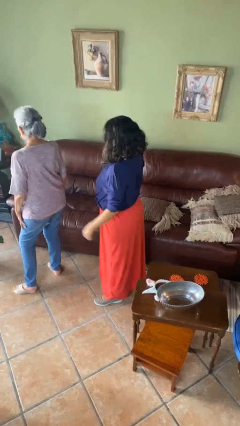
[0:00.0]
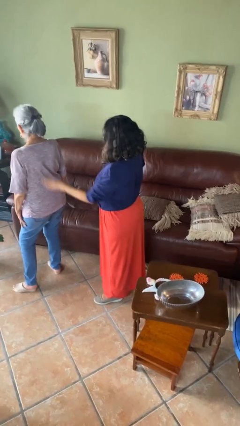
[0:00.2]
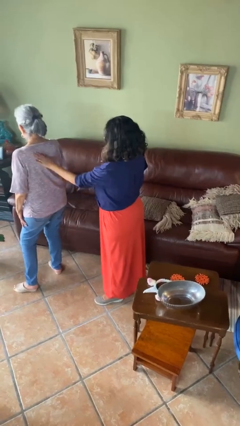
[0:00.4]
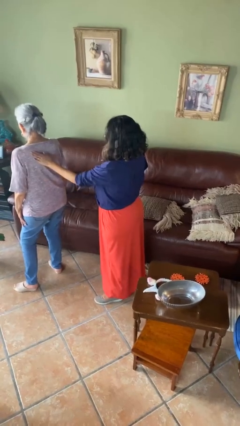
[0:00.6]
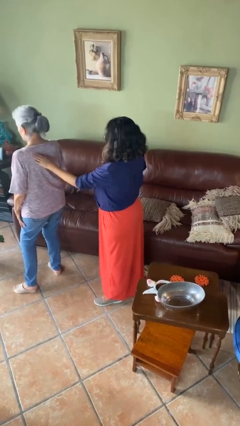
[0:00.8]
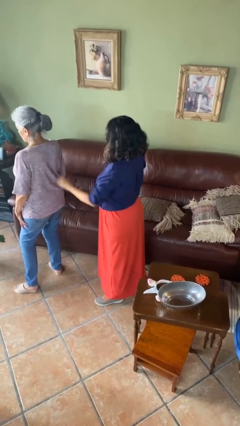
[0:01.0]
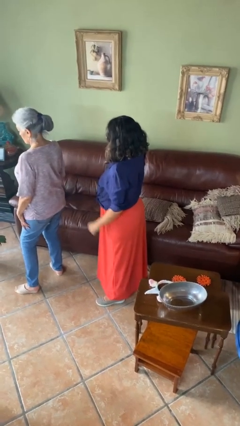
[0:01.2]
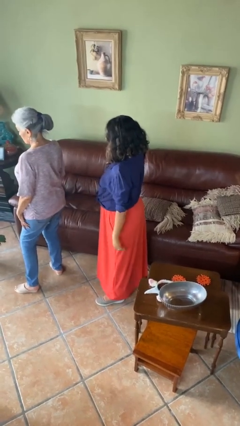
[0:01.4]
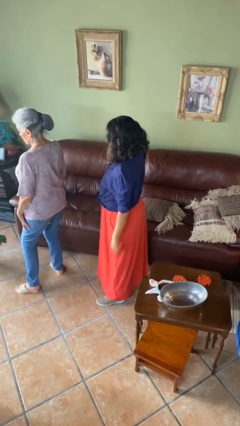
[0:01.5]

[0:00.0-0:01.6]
person touches back of person

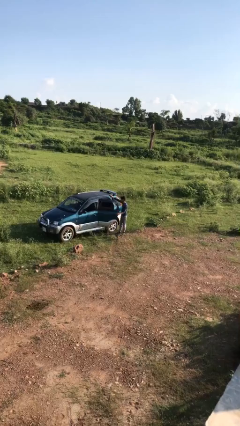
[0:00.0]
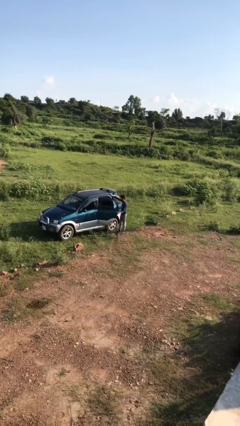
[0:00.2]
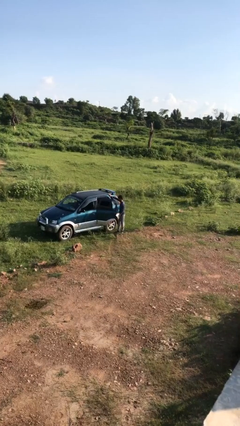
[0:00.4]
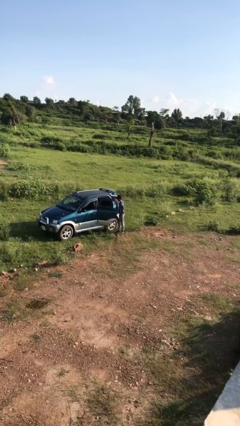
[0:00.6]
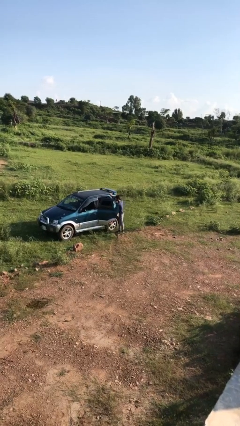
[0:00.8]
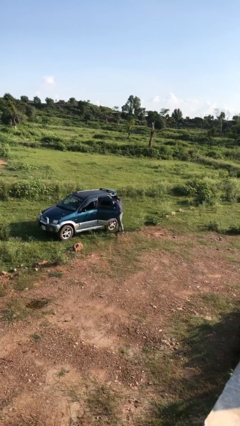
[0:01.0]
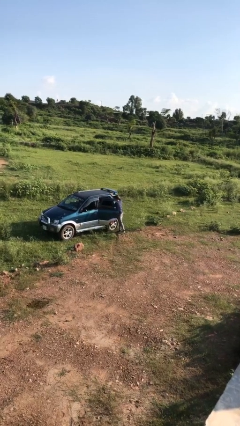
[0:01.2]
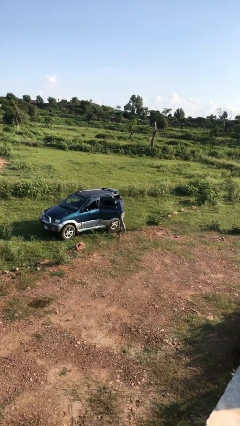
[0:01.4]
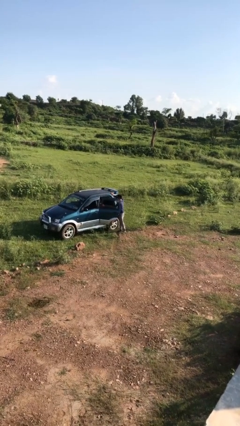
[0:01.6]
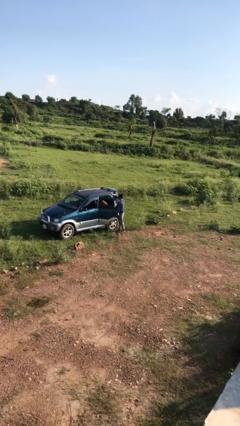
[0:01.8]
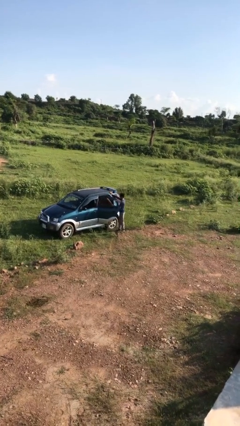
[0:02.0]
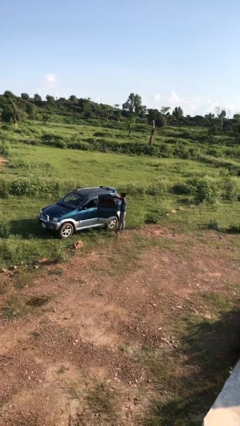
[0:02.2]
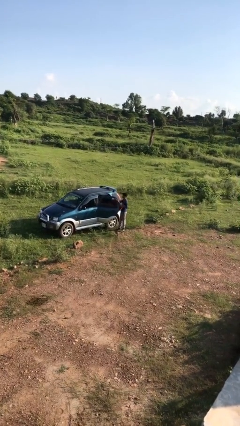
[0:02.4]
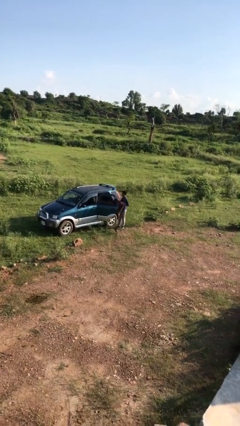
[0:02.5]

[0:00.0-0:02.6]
person unloads car

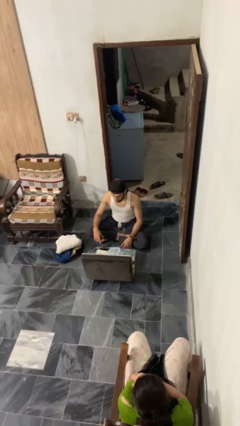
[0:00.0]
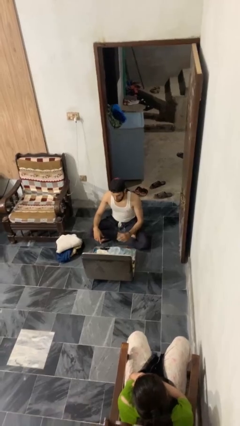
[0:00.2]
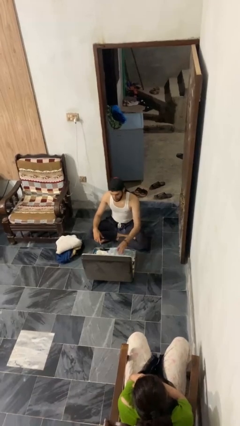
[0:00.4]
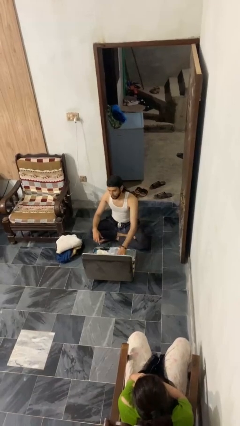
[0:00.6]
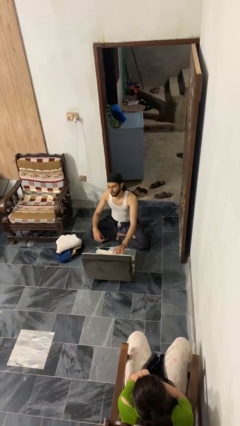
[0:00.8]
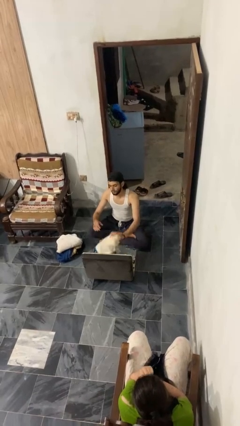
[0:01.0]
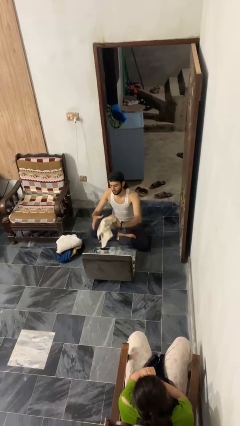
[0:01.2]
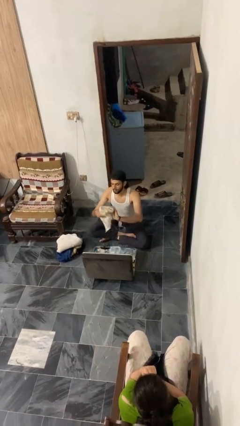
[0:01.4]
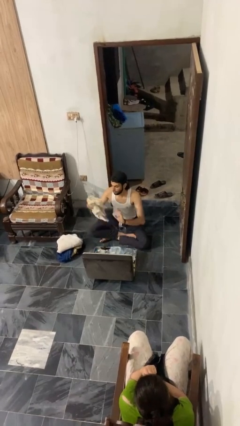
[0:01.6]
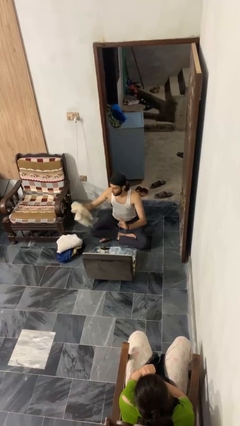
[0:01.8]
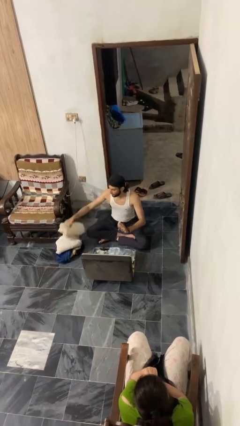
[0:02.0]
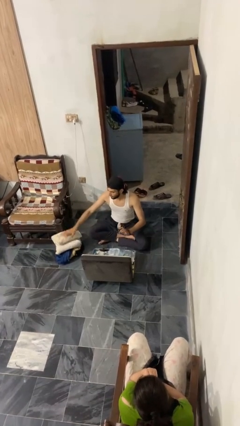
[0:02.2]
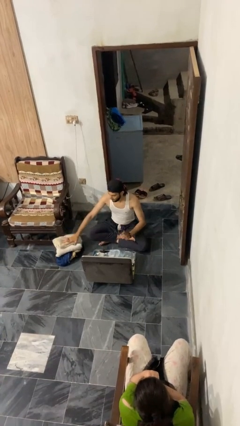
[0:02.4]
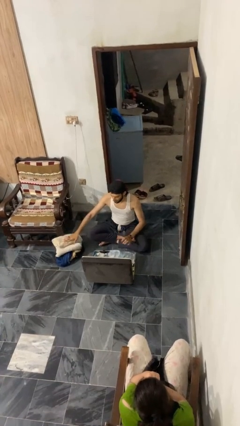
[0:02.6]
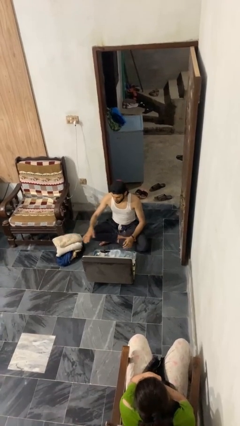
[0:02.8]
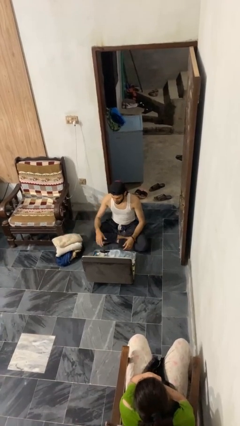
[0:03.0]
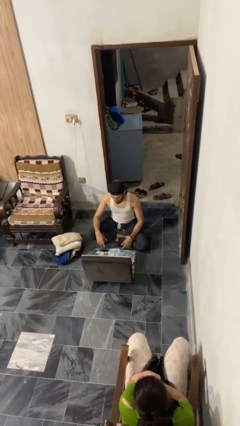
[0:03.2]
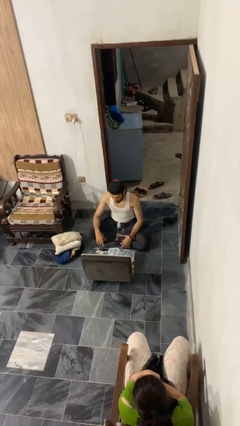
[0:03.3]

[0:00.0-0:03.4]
person unloads clothes from suitcase

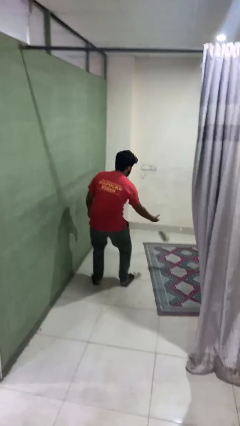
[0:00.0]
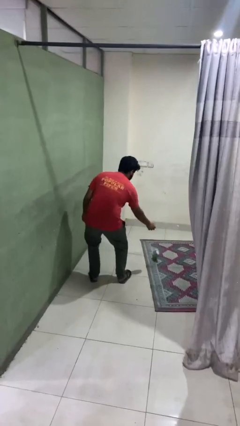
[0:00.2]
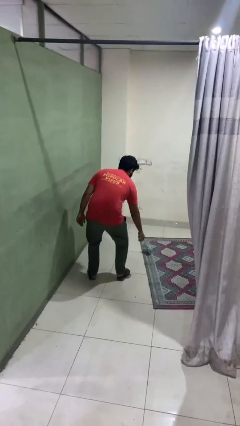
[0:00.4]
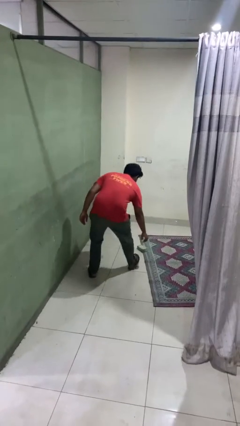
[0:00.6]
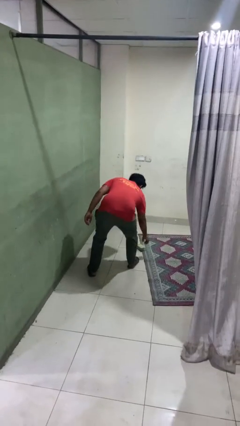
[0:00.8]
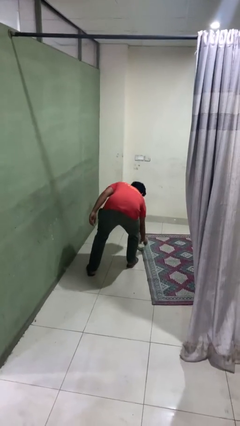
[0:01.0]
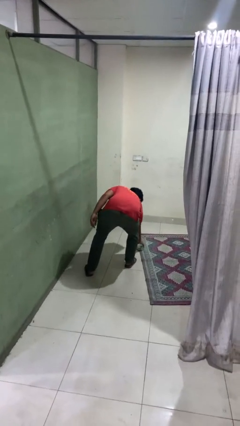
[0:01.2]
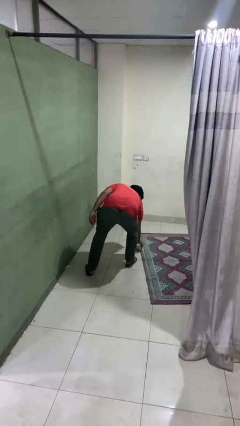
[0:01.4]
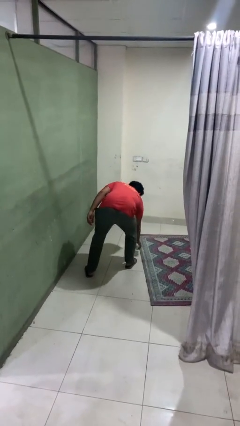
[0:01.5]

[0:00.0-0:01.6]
person catches dropped object

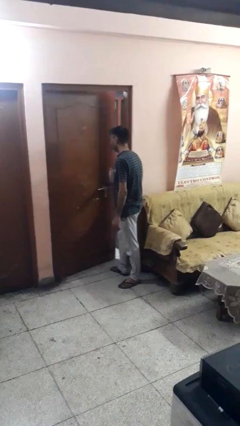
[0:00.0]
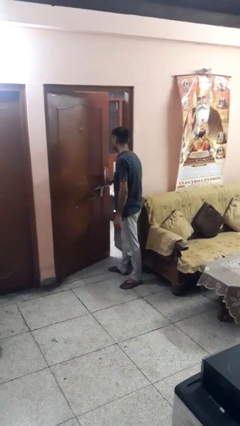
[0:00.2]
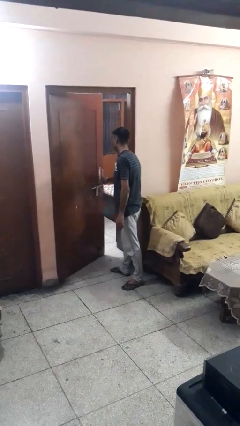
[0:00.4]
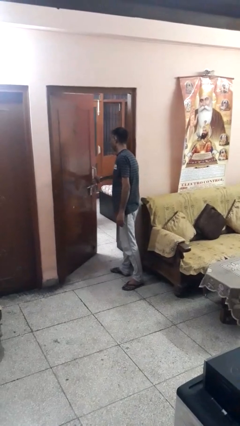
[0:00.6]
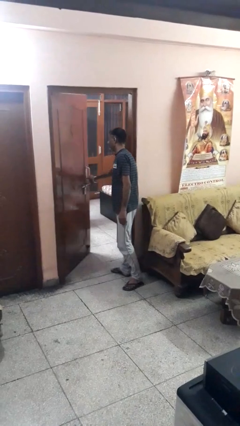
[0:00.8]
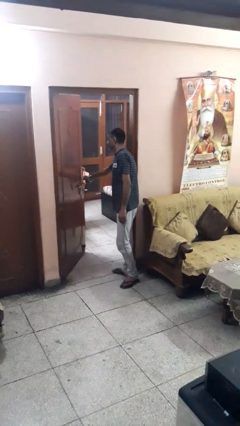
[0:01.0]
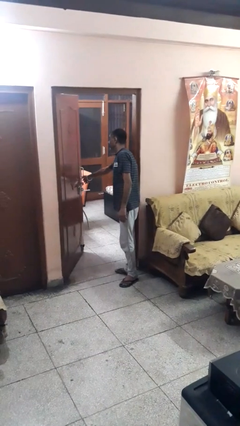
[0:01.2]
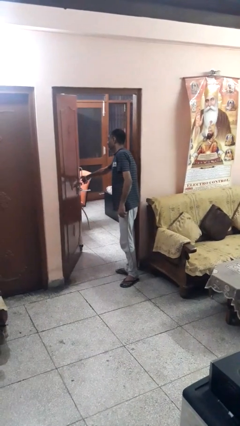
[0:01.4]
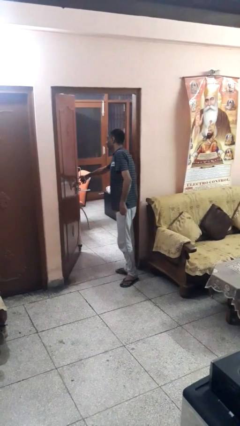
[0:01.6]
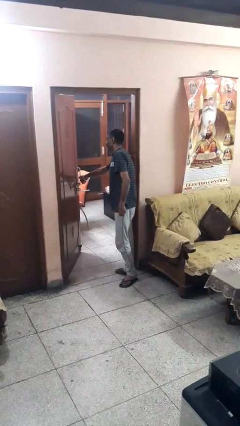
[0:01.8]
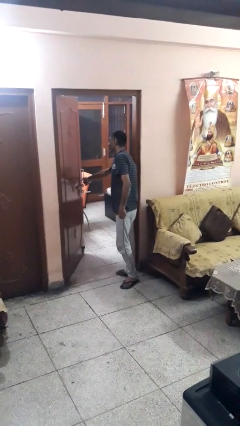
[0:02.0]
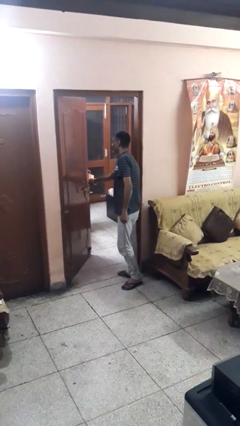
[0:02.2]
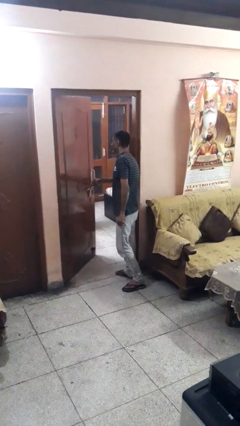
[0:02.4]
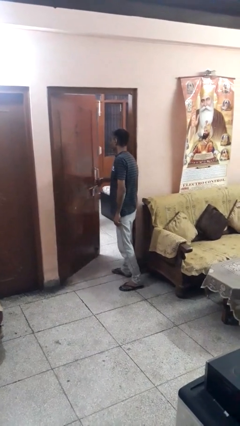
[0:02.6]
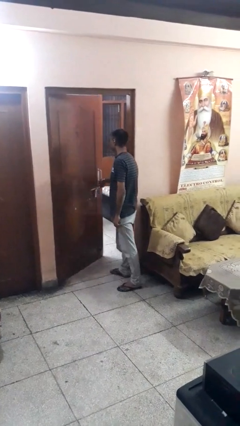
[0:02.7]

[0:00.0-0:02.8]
person opens facility door

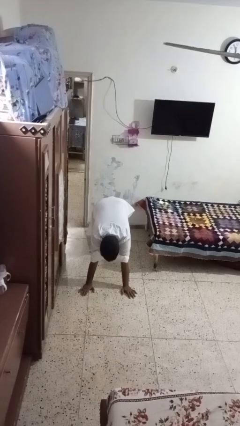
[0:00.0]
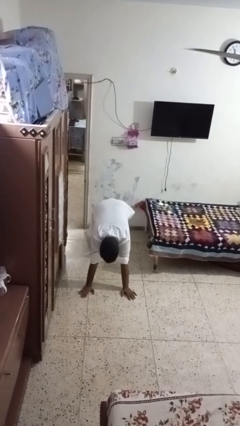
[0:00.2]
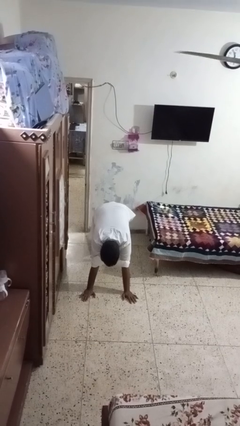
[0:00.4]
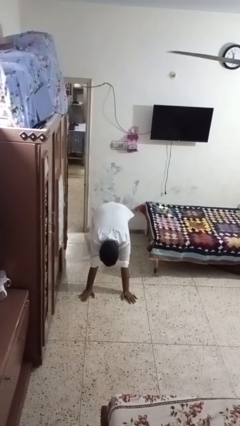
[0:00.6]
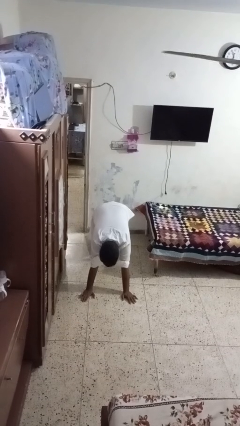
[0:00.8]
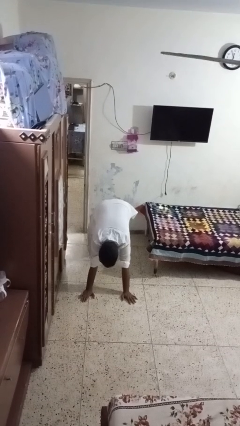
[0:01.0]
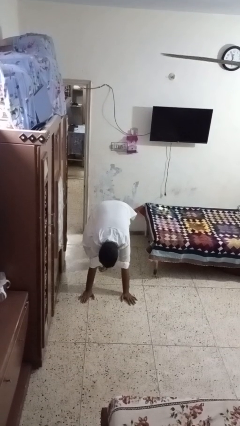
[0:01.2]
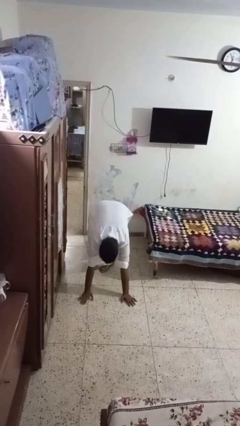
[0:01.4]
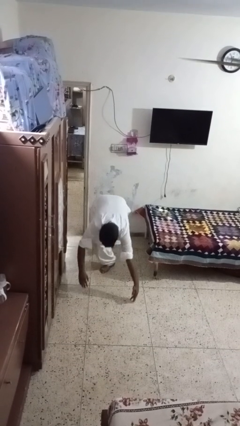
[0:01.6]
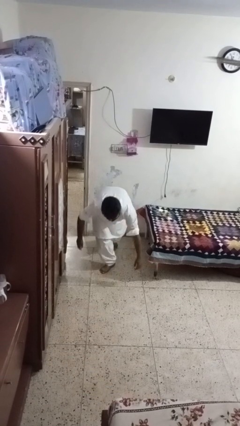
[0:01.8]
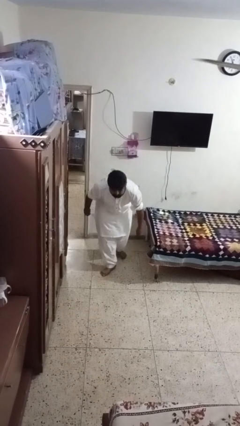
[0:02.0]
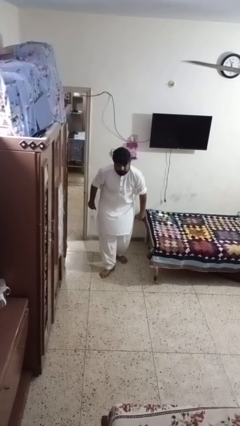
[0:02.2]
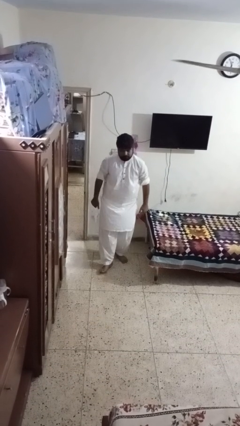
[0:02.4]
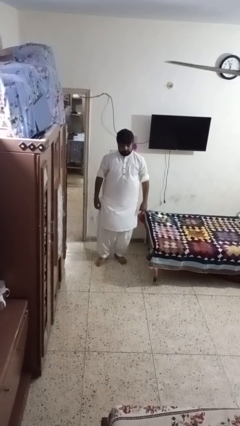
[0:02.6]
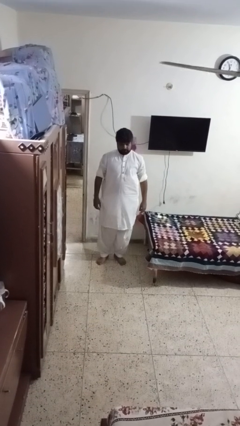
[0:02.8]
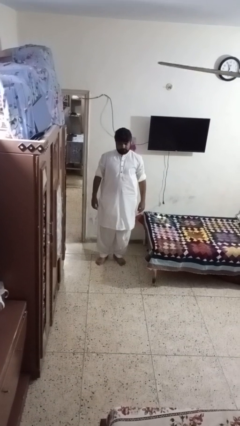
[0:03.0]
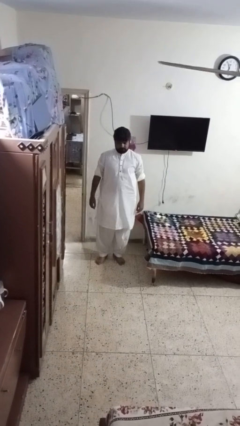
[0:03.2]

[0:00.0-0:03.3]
person stands up from floor

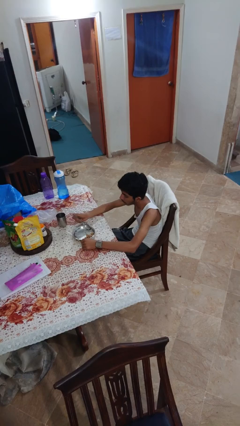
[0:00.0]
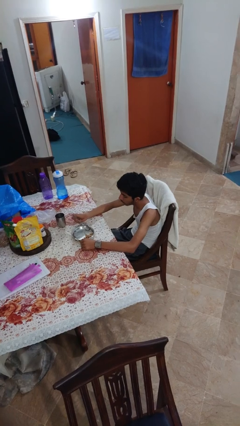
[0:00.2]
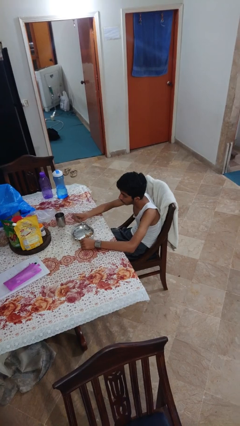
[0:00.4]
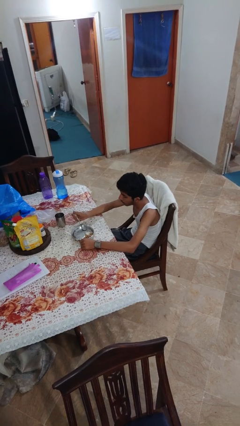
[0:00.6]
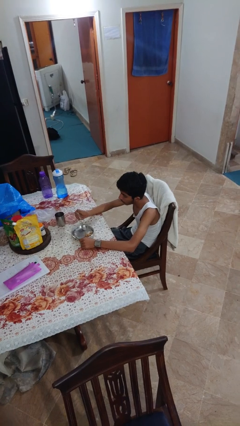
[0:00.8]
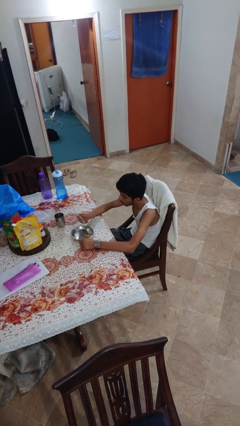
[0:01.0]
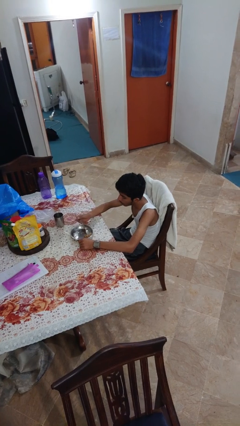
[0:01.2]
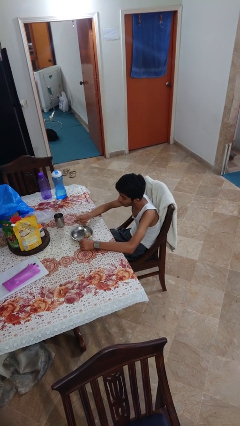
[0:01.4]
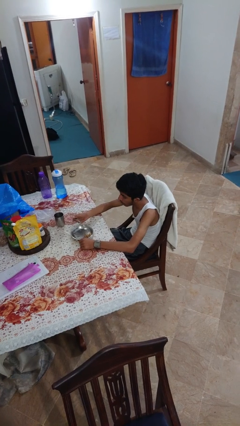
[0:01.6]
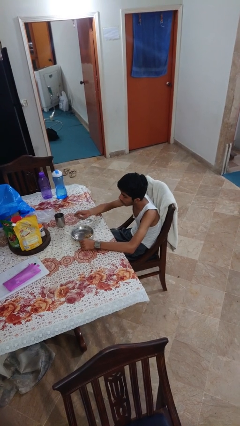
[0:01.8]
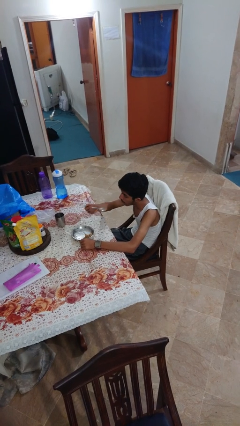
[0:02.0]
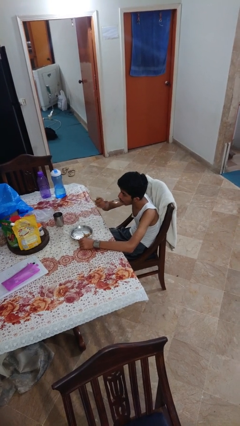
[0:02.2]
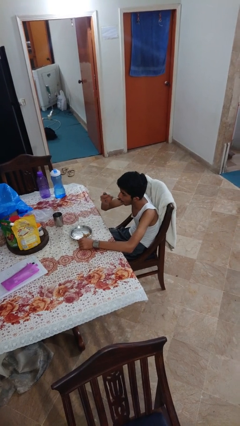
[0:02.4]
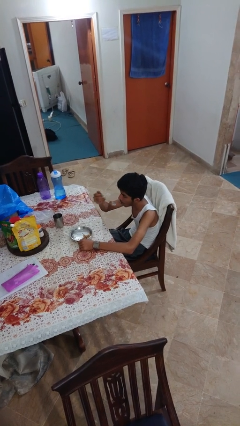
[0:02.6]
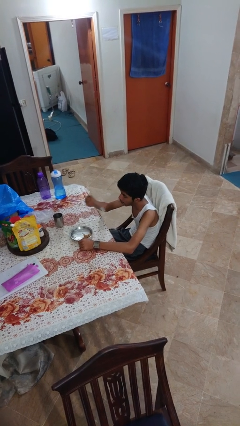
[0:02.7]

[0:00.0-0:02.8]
person eats with utensil
